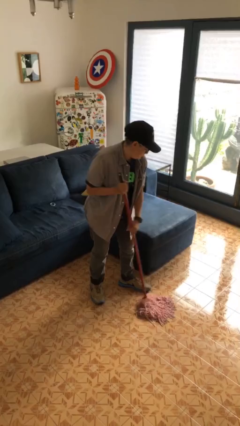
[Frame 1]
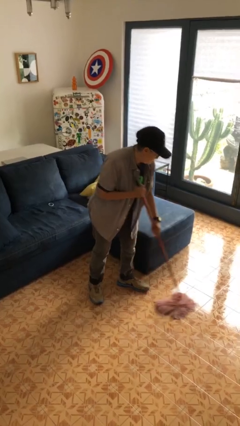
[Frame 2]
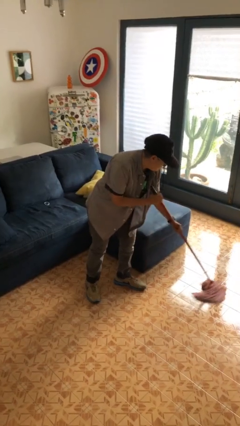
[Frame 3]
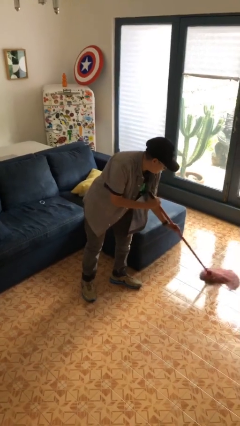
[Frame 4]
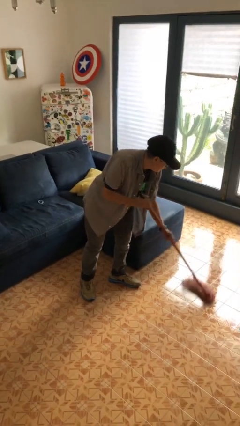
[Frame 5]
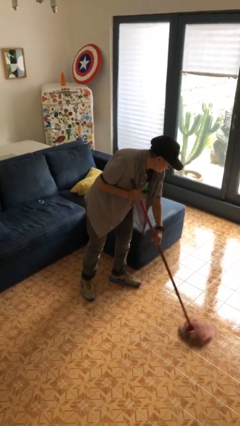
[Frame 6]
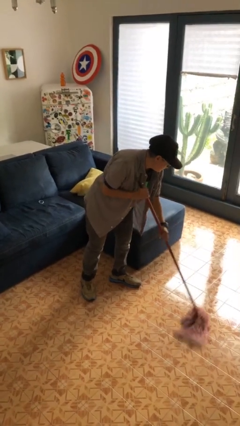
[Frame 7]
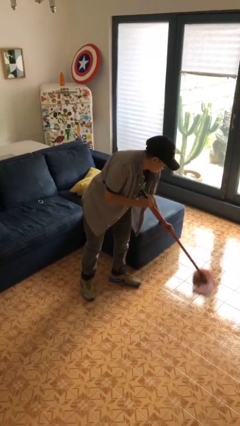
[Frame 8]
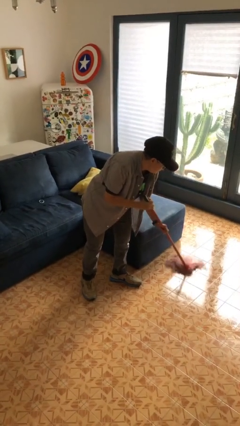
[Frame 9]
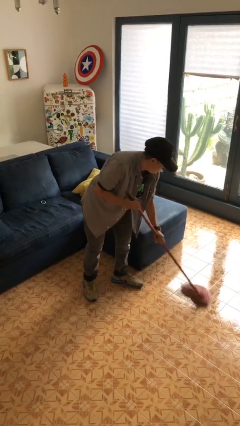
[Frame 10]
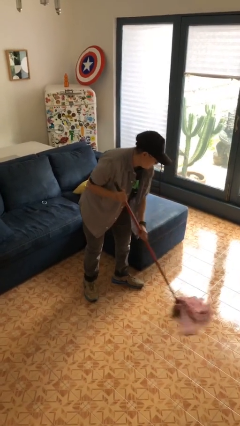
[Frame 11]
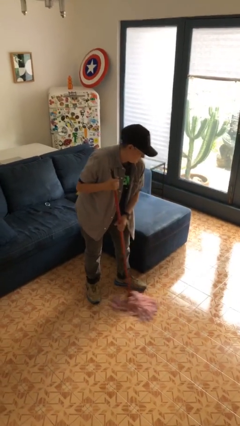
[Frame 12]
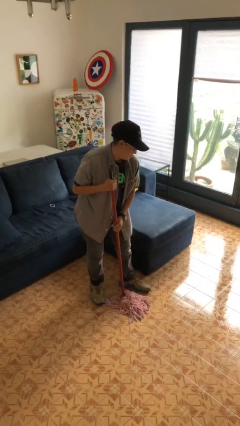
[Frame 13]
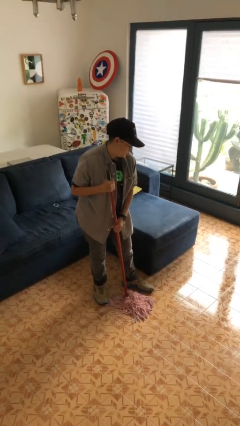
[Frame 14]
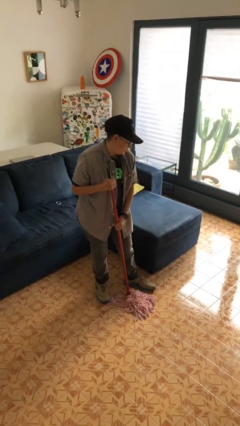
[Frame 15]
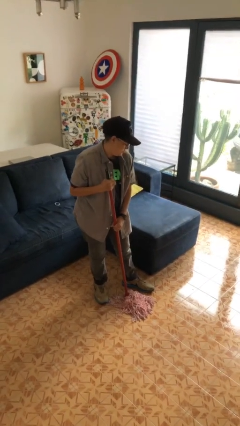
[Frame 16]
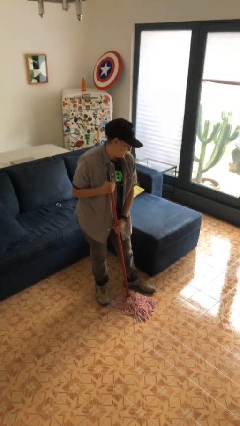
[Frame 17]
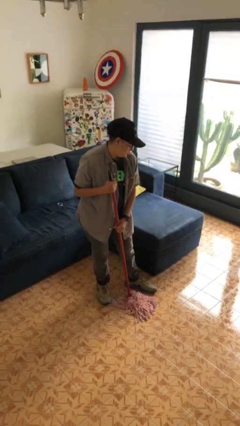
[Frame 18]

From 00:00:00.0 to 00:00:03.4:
person mops

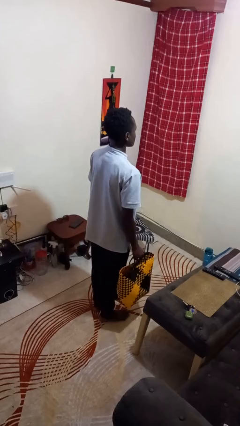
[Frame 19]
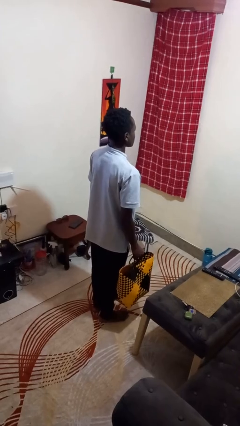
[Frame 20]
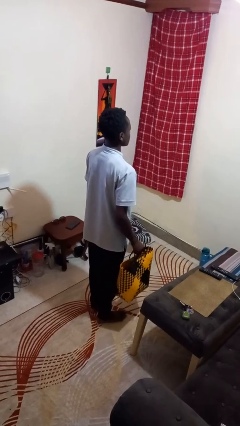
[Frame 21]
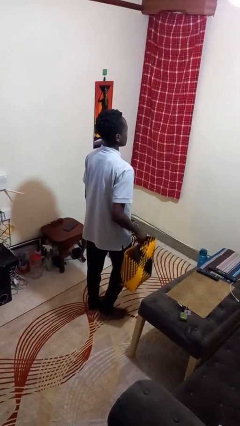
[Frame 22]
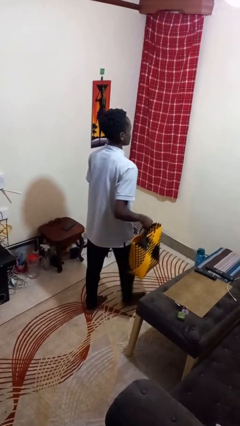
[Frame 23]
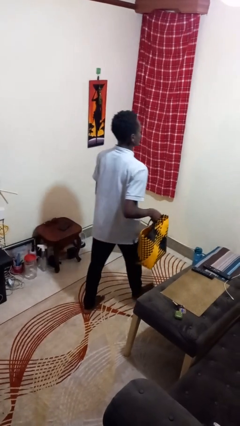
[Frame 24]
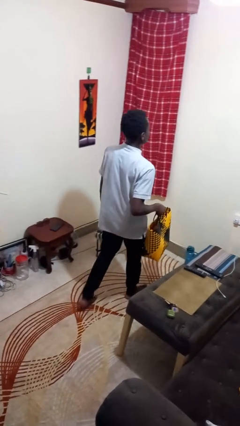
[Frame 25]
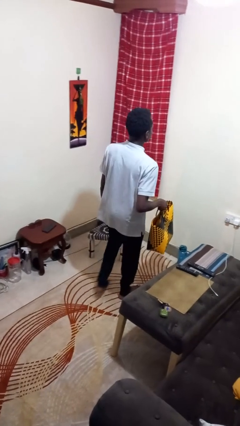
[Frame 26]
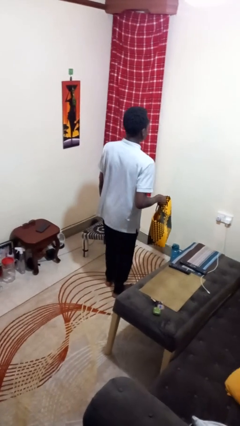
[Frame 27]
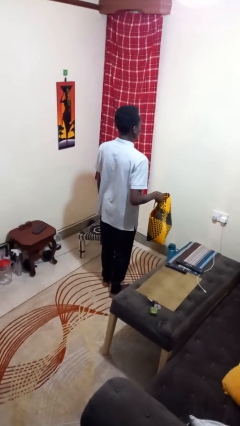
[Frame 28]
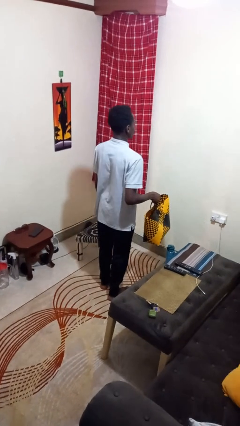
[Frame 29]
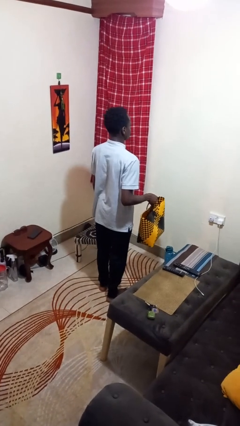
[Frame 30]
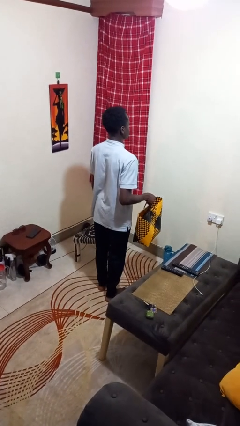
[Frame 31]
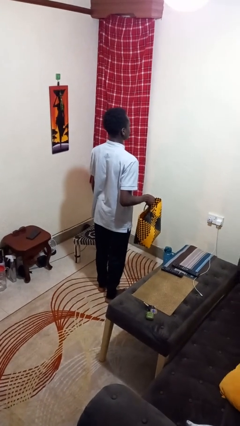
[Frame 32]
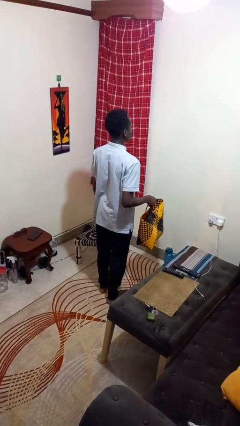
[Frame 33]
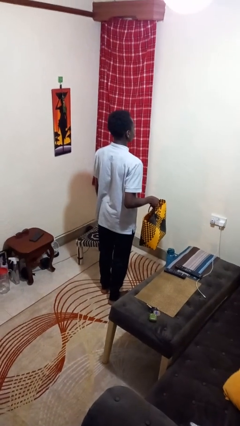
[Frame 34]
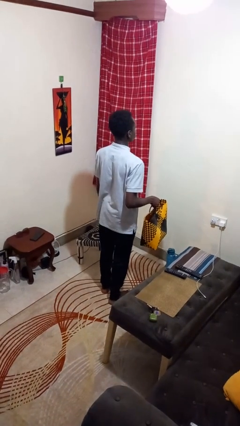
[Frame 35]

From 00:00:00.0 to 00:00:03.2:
person carries groceries

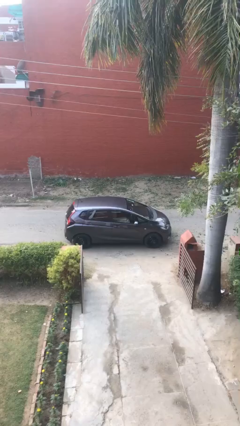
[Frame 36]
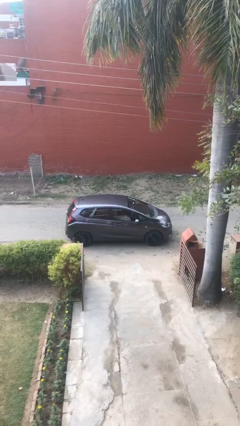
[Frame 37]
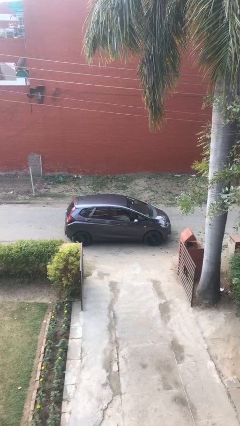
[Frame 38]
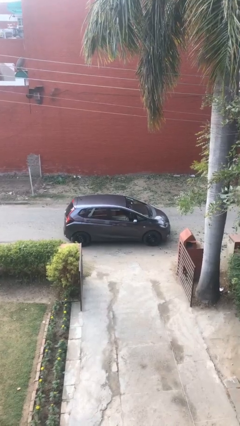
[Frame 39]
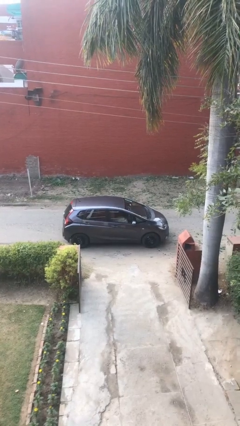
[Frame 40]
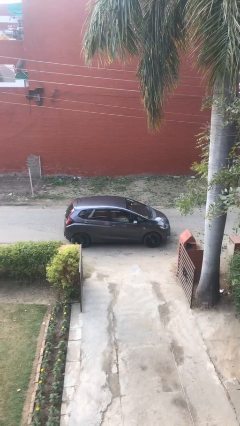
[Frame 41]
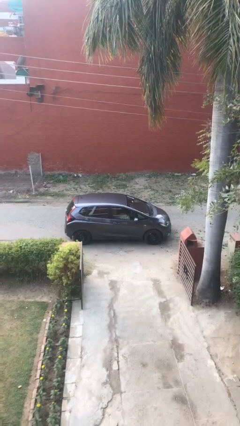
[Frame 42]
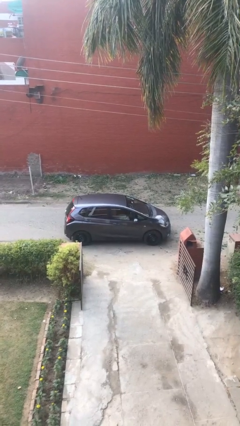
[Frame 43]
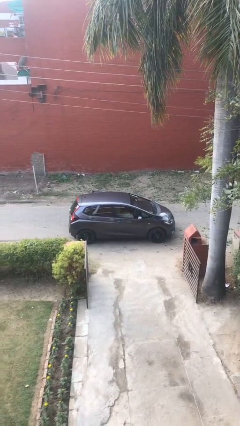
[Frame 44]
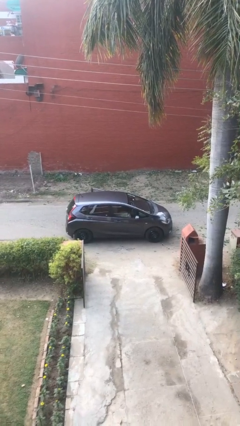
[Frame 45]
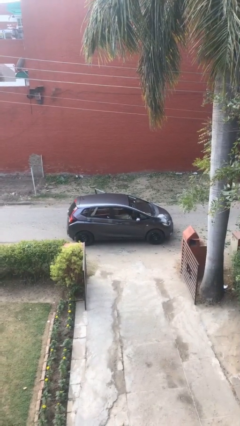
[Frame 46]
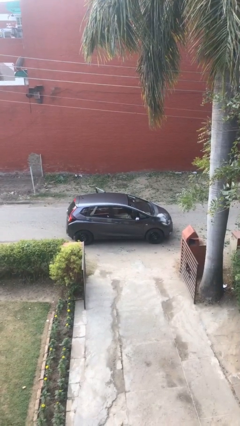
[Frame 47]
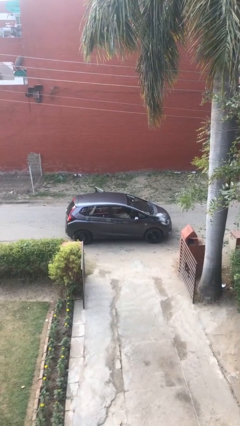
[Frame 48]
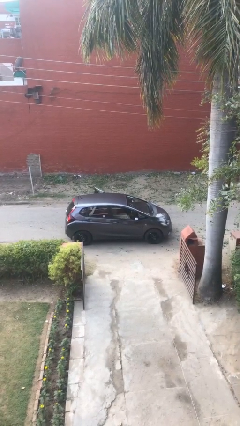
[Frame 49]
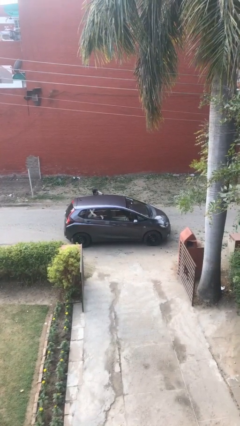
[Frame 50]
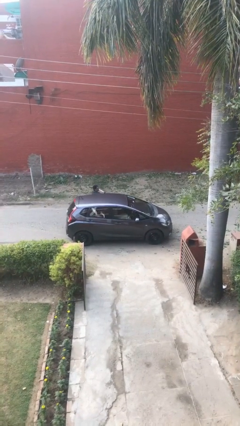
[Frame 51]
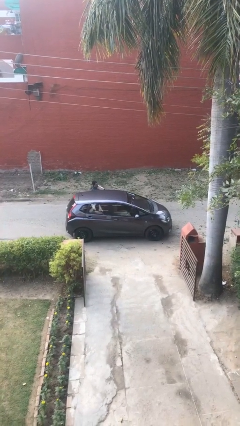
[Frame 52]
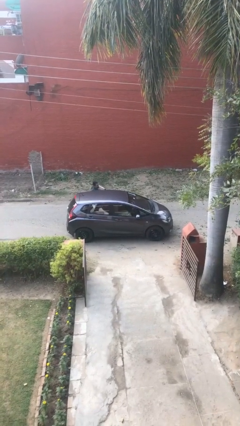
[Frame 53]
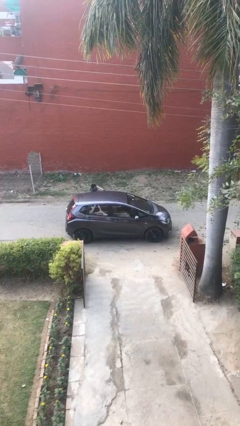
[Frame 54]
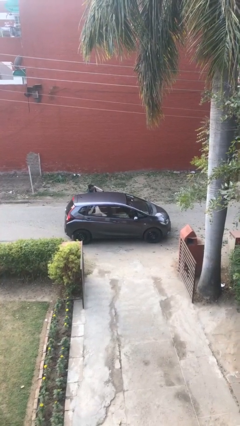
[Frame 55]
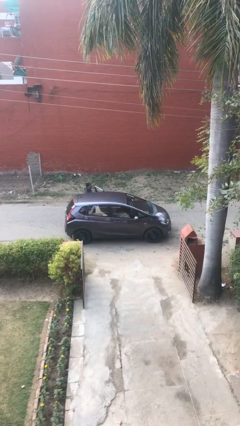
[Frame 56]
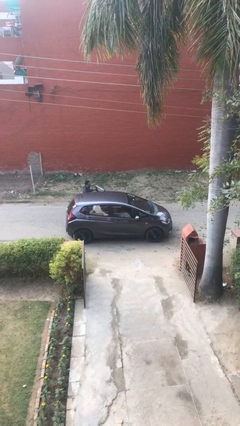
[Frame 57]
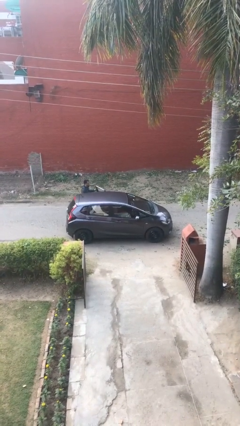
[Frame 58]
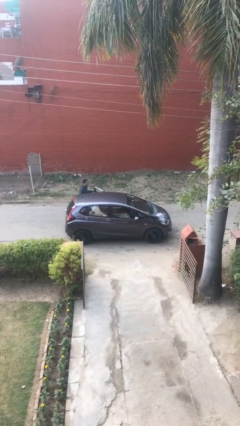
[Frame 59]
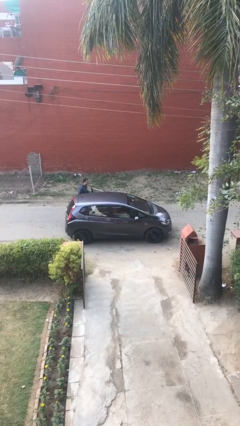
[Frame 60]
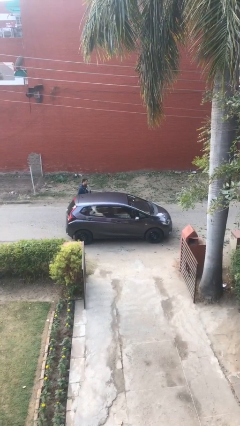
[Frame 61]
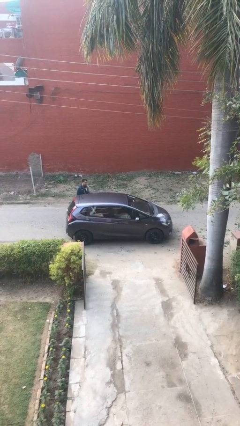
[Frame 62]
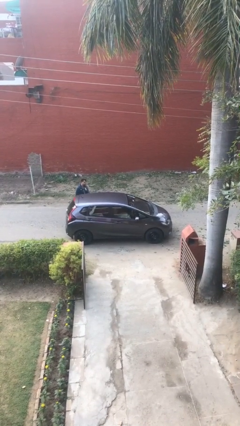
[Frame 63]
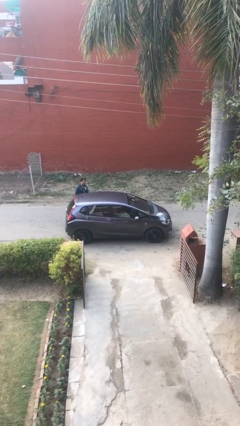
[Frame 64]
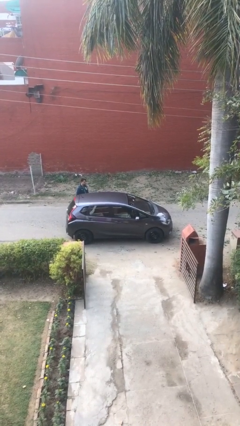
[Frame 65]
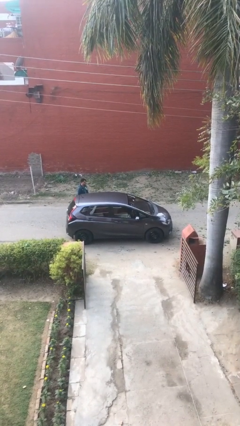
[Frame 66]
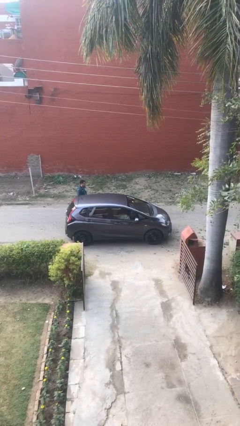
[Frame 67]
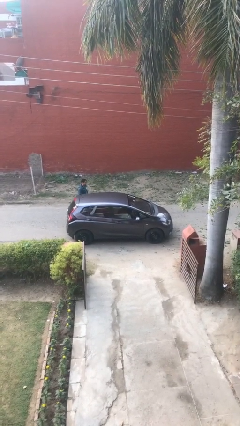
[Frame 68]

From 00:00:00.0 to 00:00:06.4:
car drops off person

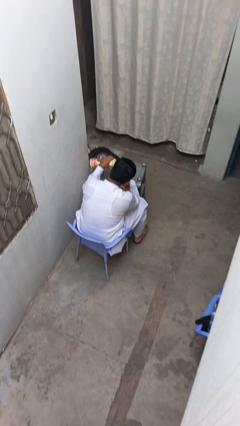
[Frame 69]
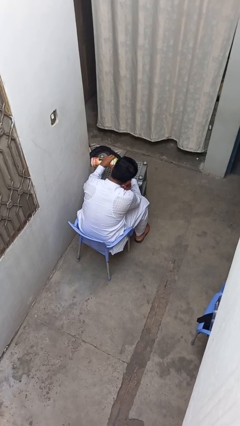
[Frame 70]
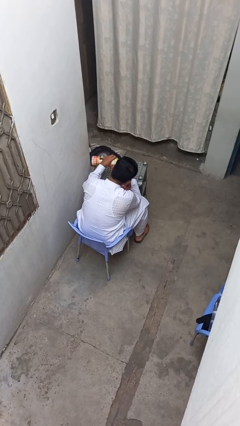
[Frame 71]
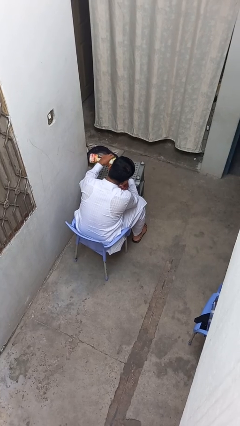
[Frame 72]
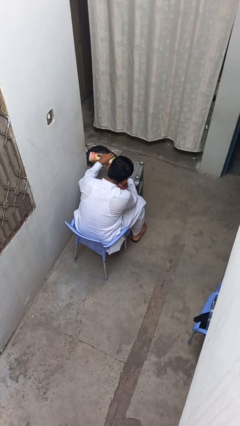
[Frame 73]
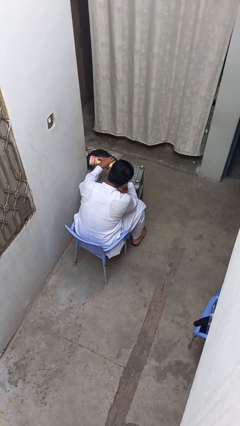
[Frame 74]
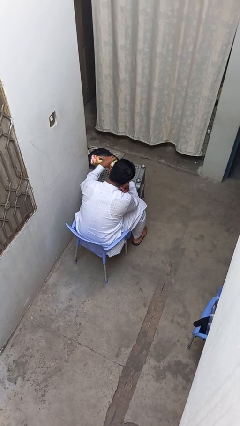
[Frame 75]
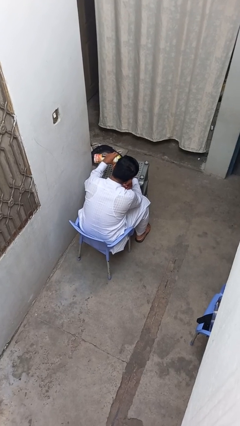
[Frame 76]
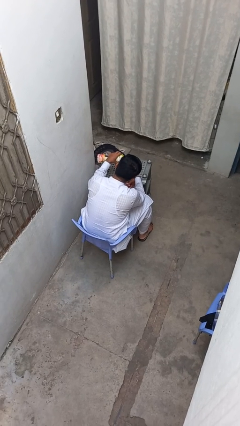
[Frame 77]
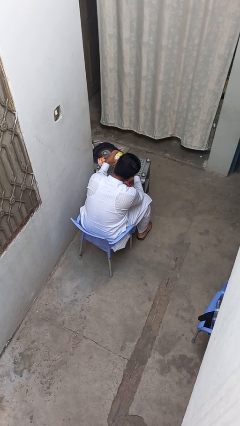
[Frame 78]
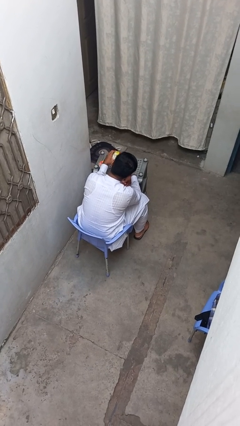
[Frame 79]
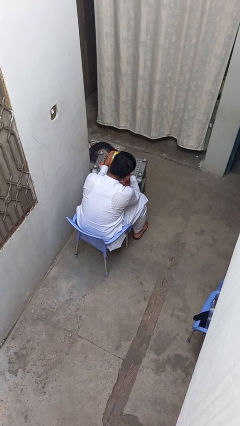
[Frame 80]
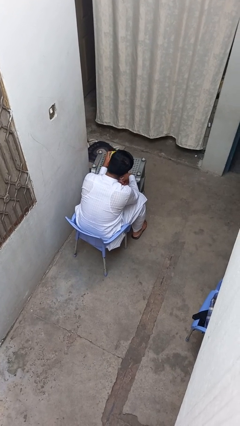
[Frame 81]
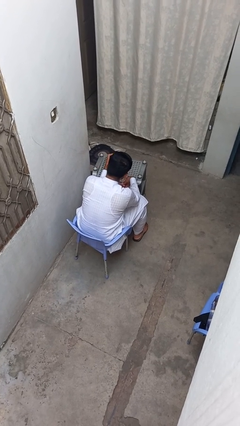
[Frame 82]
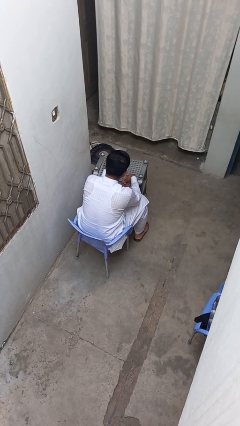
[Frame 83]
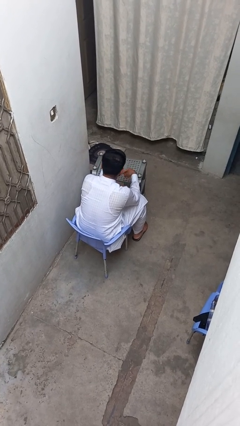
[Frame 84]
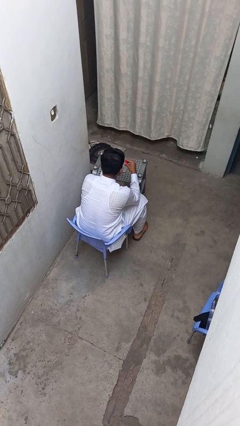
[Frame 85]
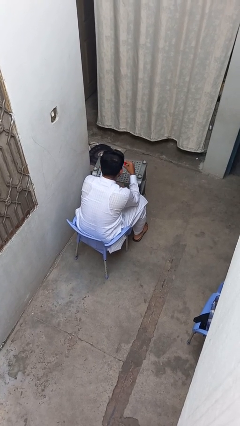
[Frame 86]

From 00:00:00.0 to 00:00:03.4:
person pours liquid into cup

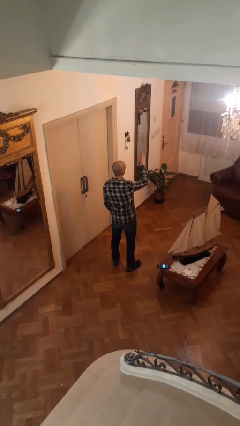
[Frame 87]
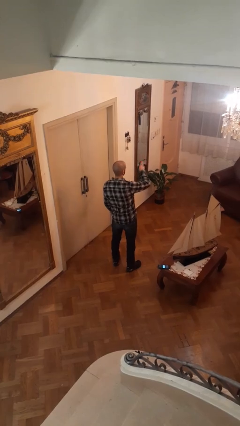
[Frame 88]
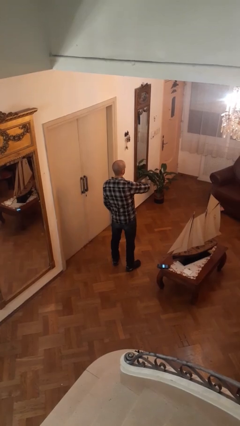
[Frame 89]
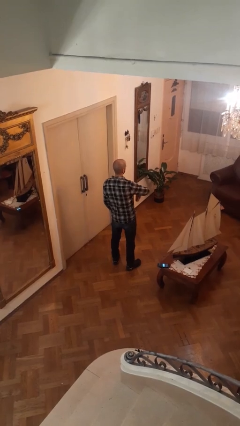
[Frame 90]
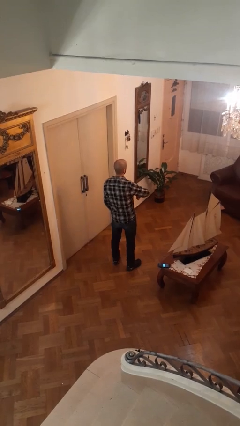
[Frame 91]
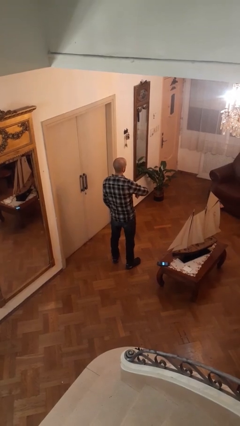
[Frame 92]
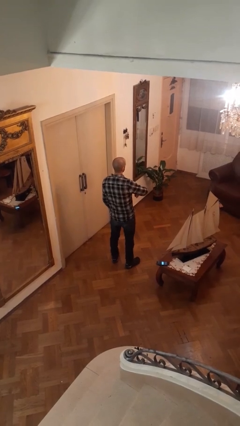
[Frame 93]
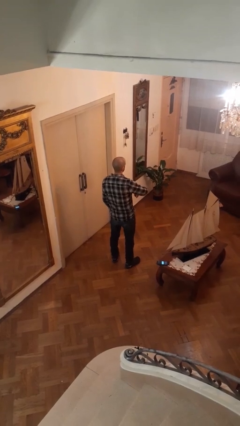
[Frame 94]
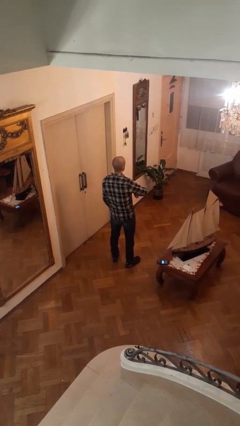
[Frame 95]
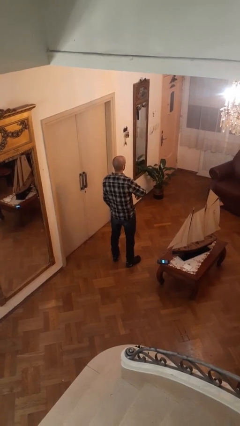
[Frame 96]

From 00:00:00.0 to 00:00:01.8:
person gestures swipe down
